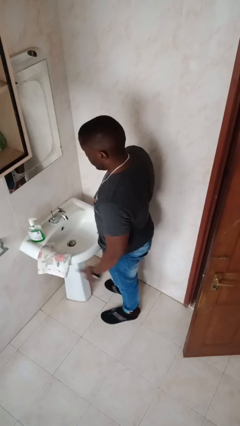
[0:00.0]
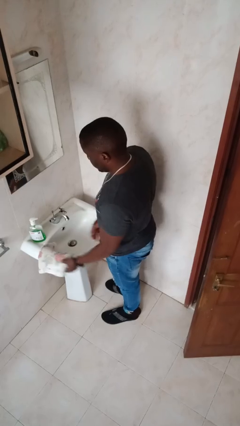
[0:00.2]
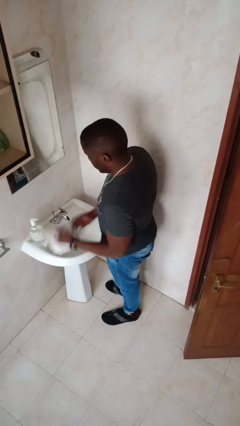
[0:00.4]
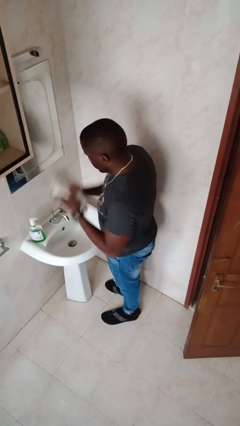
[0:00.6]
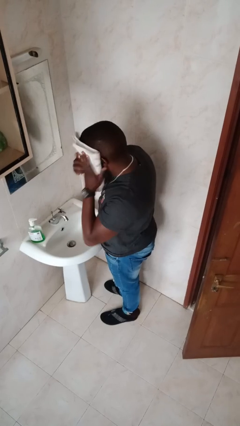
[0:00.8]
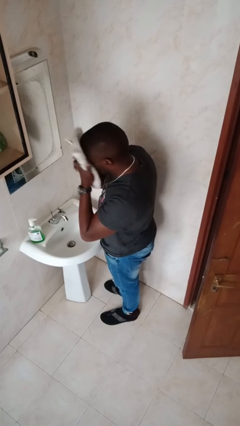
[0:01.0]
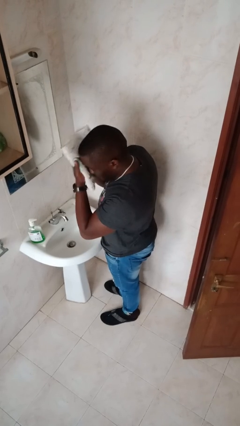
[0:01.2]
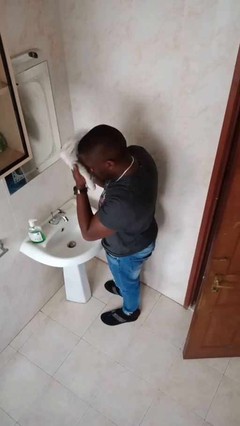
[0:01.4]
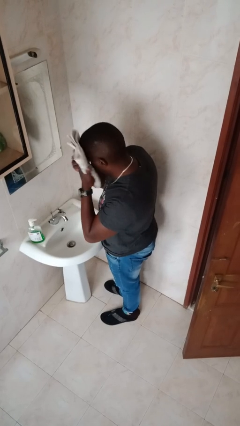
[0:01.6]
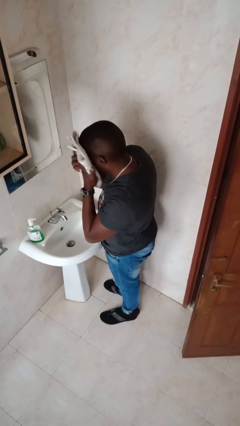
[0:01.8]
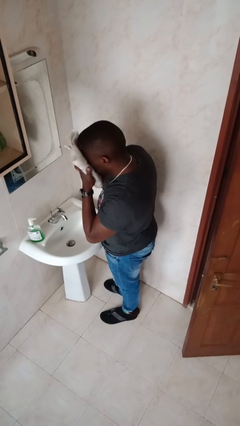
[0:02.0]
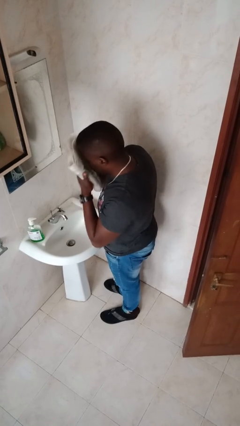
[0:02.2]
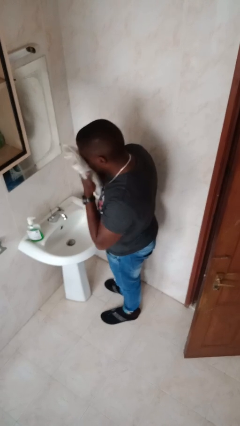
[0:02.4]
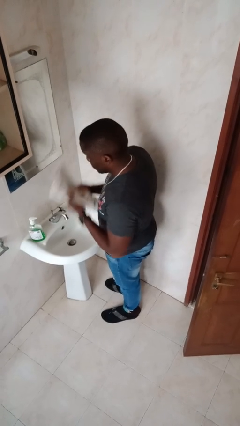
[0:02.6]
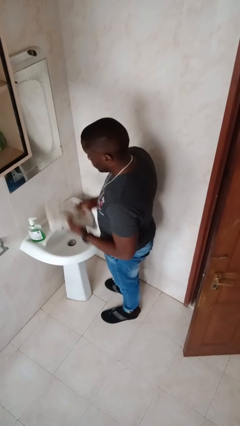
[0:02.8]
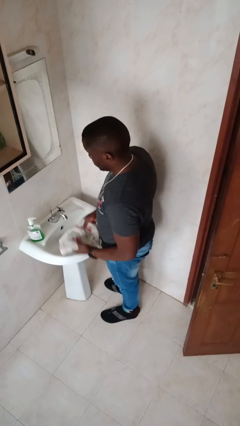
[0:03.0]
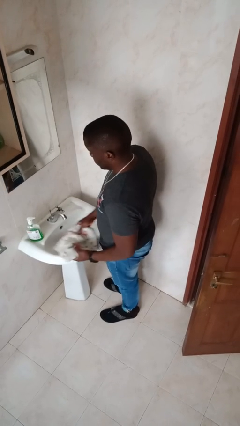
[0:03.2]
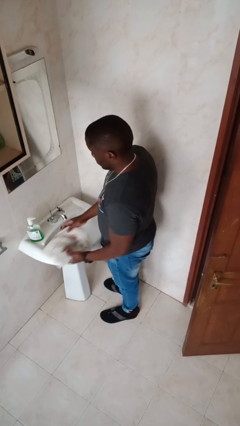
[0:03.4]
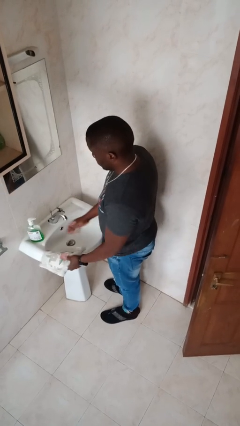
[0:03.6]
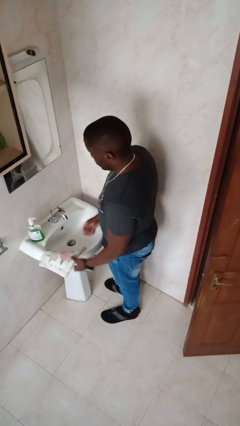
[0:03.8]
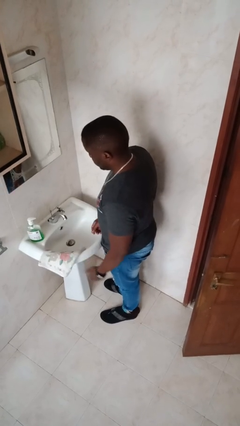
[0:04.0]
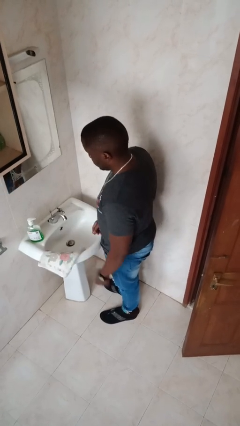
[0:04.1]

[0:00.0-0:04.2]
person dries face with towel

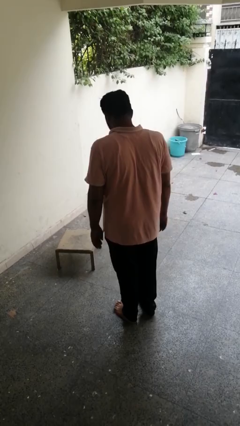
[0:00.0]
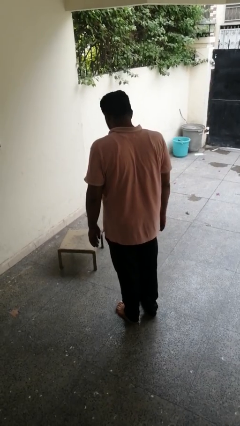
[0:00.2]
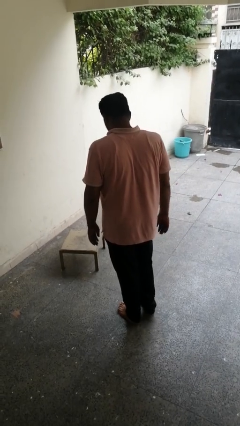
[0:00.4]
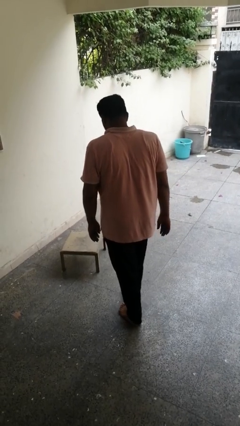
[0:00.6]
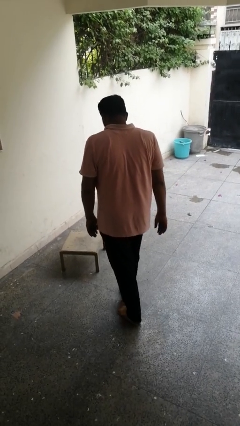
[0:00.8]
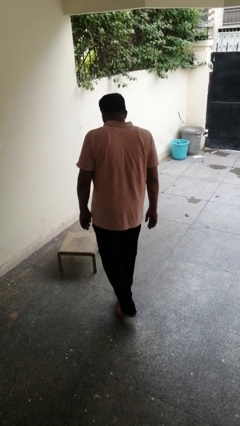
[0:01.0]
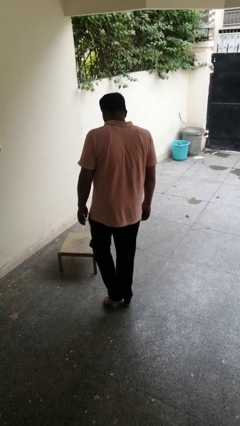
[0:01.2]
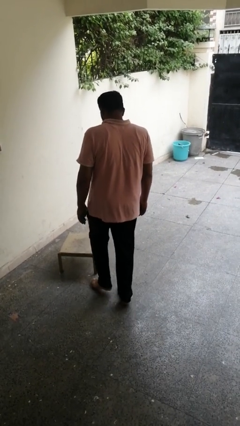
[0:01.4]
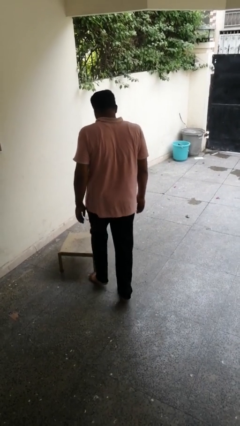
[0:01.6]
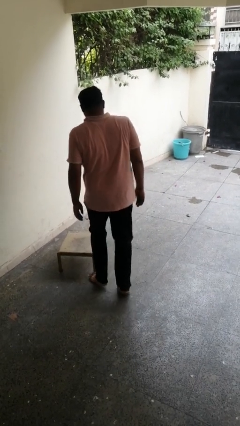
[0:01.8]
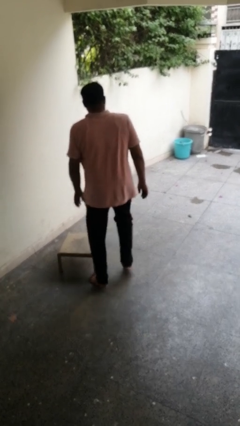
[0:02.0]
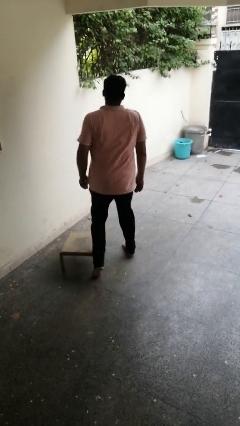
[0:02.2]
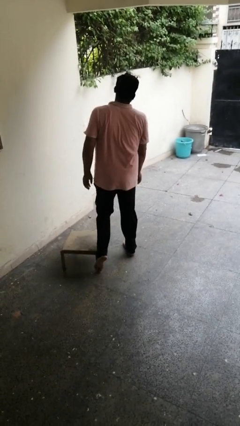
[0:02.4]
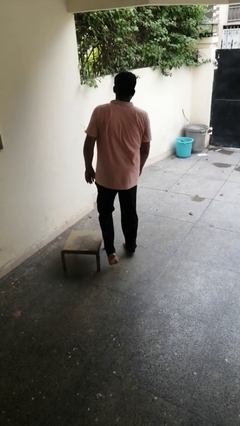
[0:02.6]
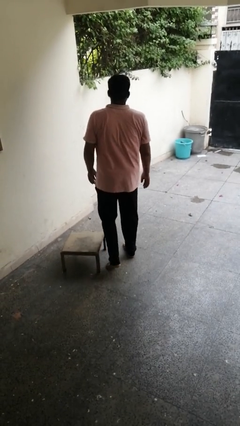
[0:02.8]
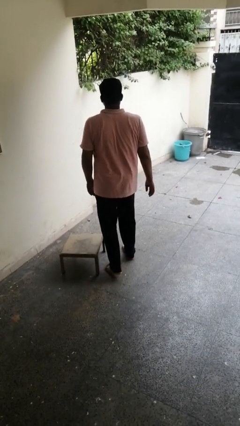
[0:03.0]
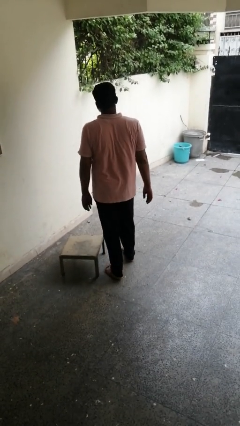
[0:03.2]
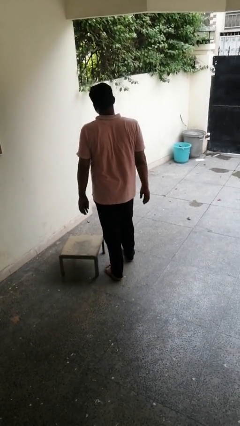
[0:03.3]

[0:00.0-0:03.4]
person stubs toe

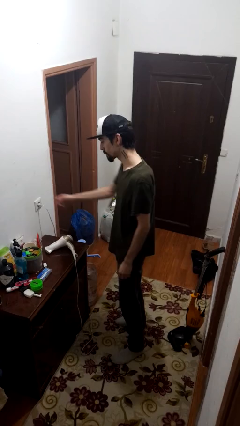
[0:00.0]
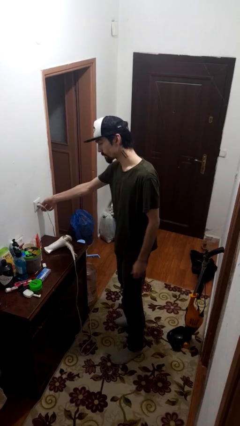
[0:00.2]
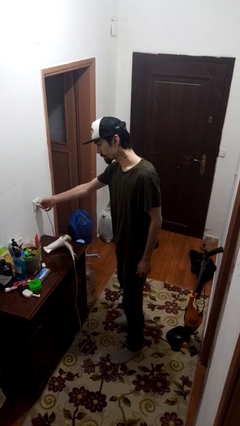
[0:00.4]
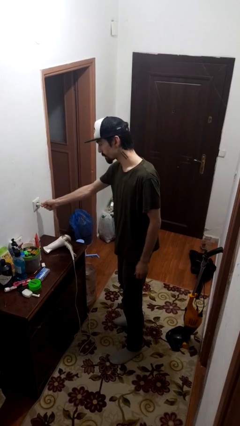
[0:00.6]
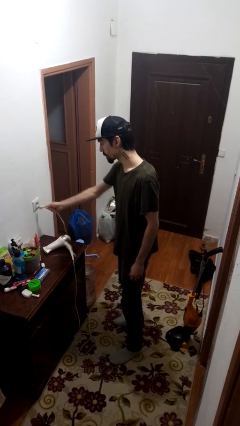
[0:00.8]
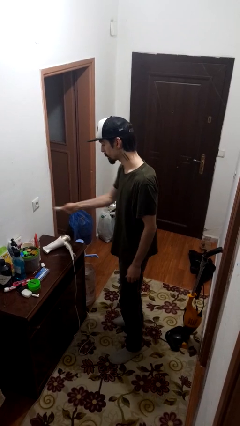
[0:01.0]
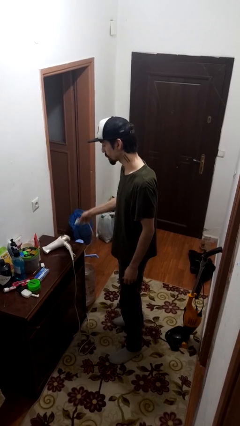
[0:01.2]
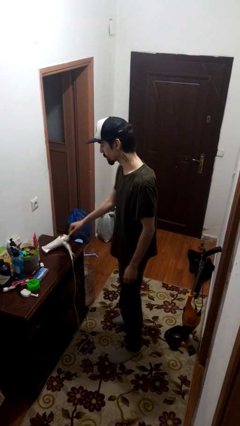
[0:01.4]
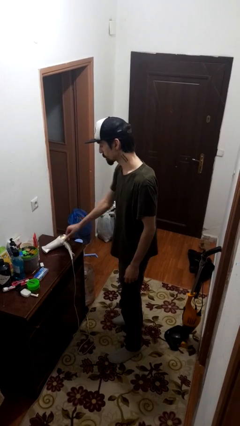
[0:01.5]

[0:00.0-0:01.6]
person unplugs from electrical socket

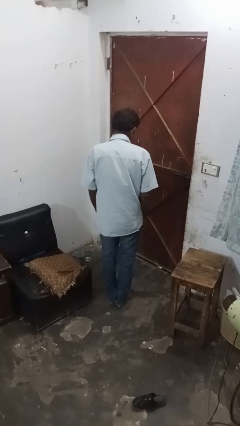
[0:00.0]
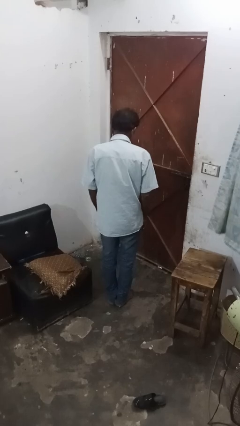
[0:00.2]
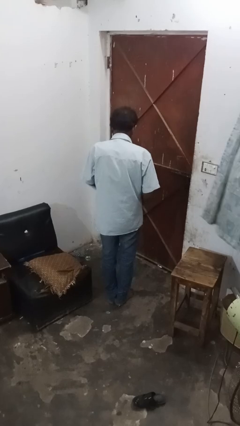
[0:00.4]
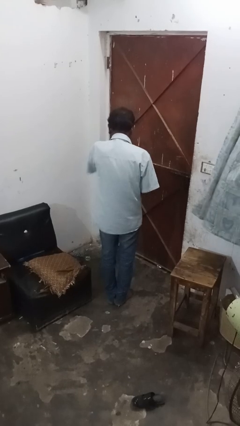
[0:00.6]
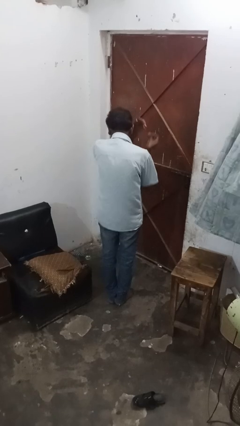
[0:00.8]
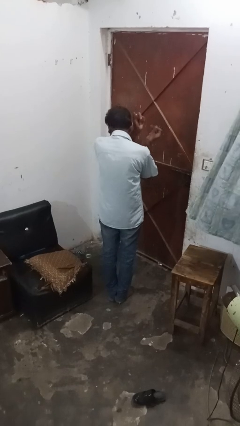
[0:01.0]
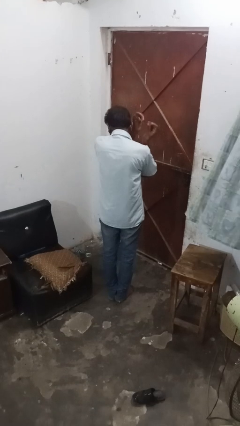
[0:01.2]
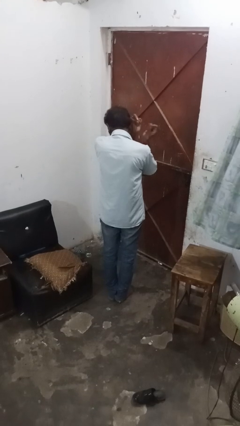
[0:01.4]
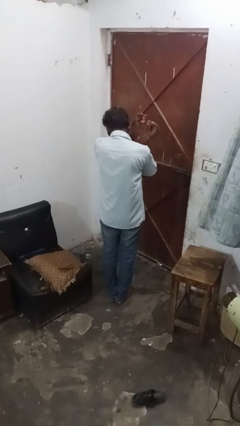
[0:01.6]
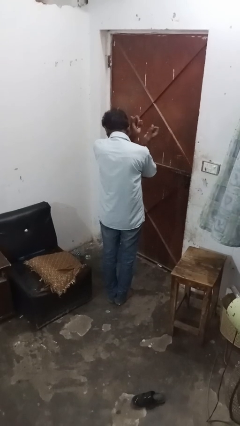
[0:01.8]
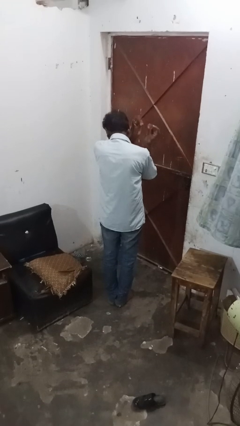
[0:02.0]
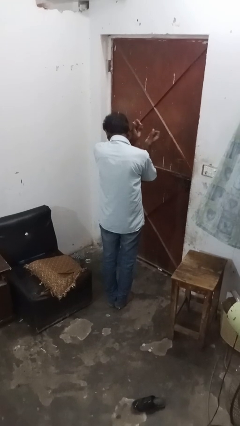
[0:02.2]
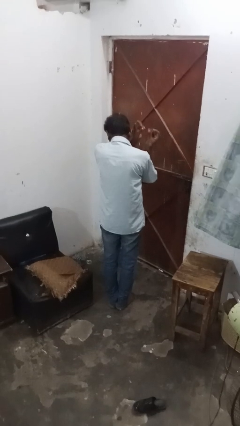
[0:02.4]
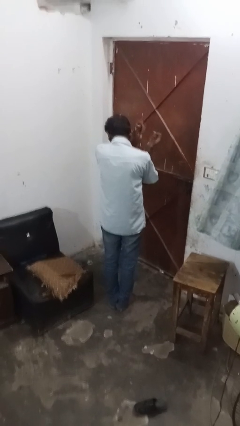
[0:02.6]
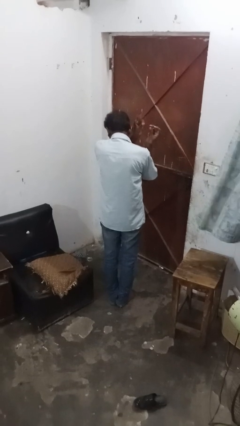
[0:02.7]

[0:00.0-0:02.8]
person snaps fingers

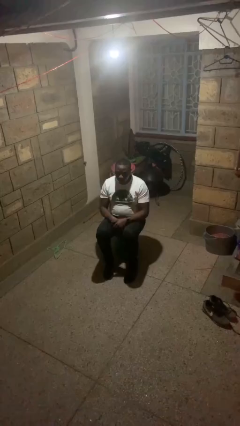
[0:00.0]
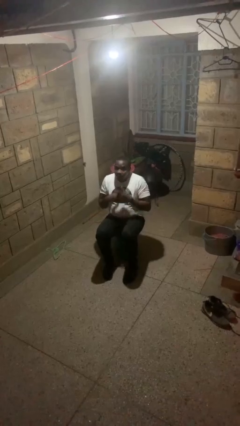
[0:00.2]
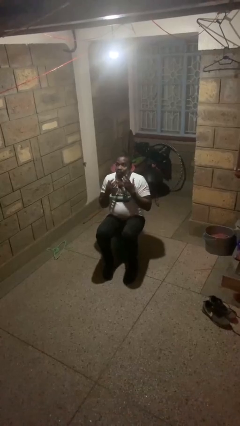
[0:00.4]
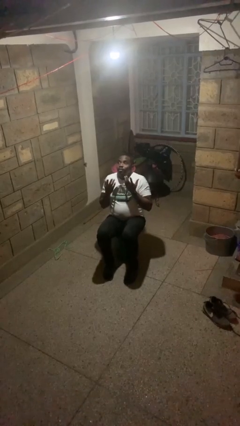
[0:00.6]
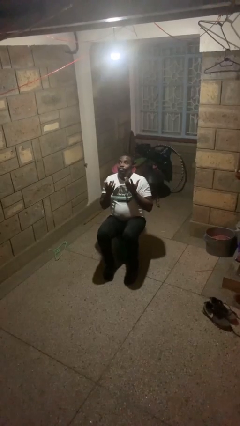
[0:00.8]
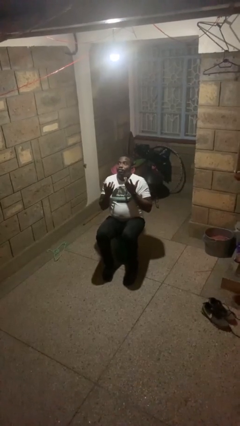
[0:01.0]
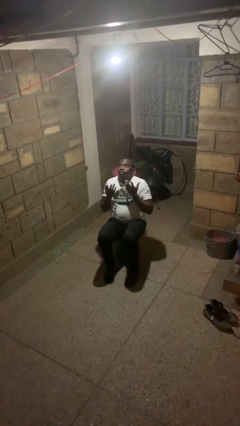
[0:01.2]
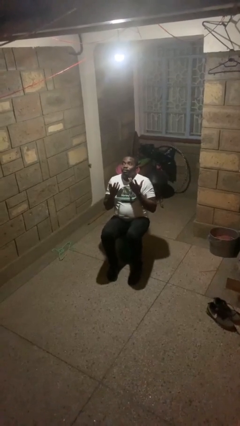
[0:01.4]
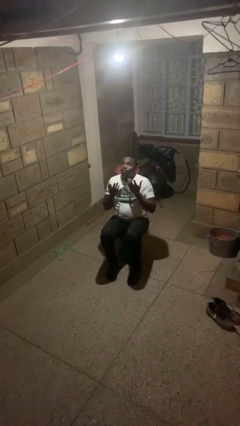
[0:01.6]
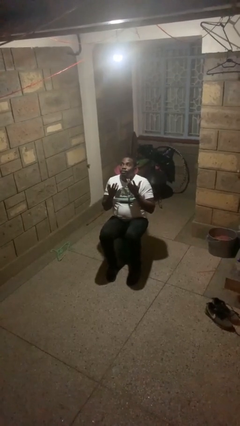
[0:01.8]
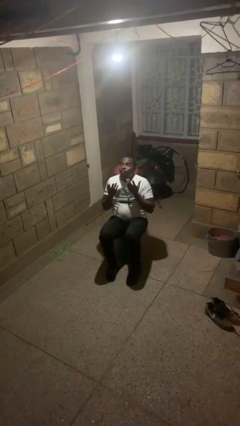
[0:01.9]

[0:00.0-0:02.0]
person shrugs

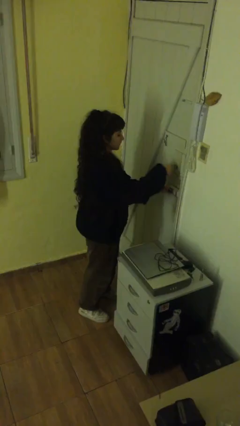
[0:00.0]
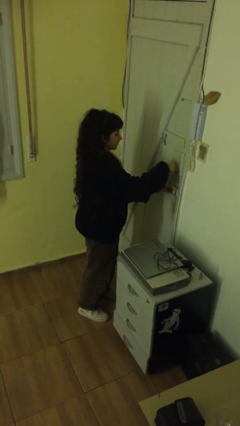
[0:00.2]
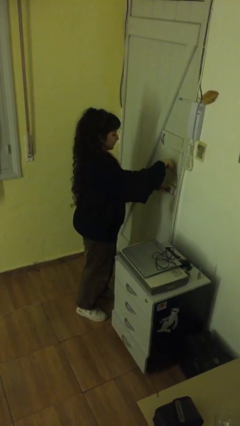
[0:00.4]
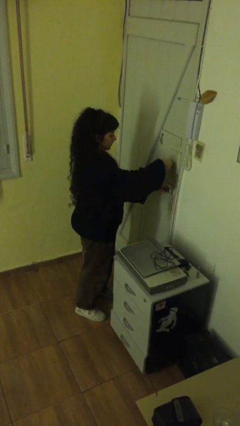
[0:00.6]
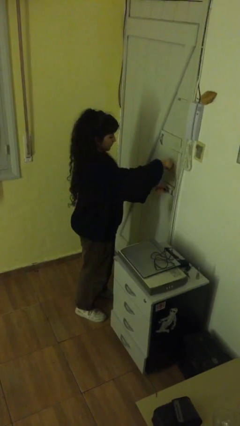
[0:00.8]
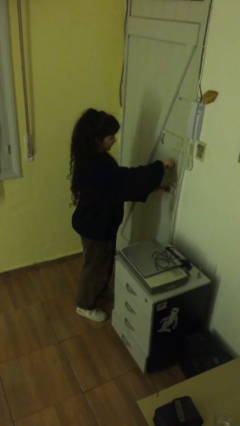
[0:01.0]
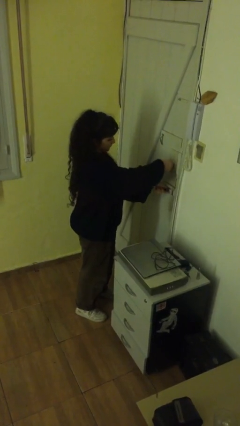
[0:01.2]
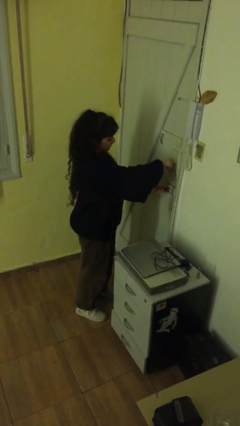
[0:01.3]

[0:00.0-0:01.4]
person unlocks door with keys

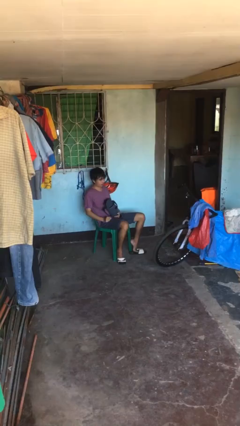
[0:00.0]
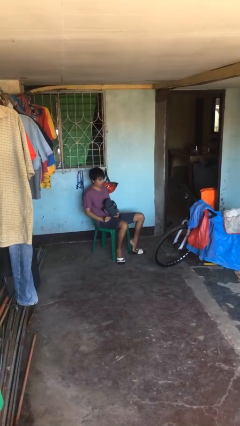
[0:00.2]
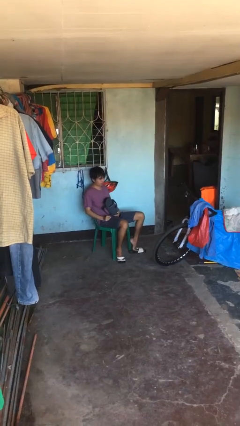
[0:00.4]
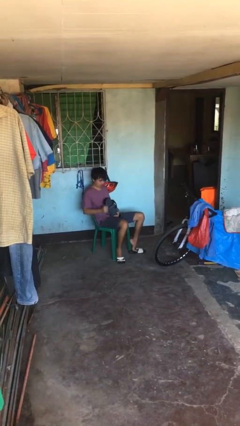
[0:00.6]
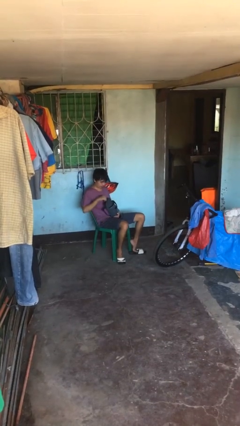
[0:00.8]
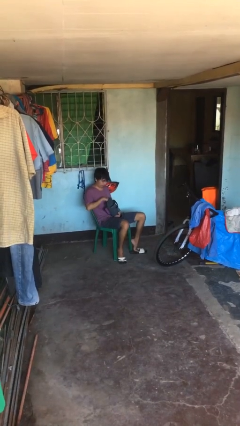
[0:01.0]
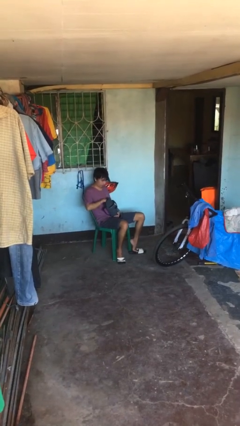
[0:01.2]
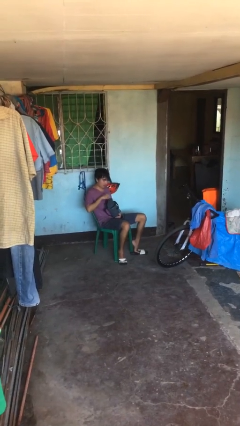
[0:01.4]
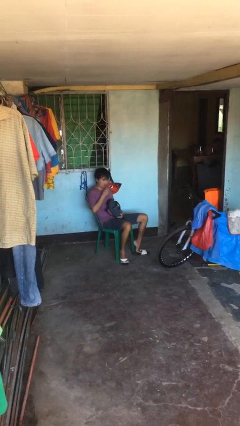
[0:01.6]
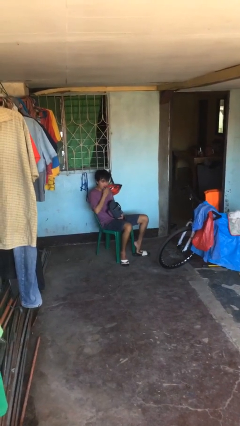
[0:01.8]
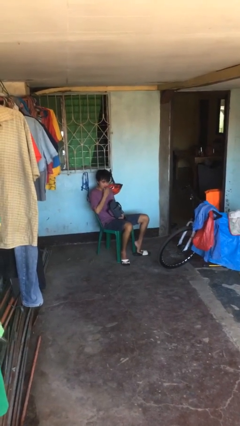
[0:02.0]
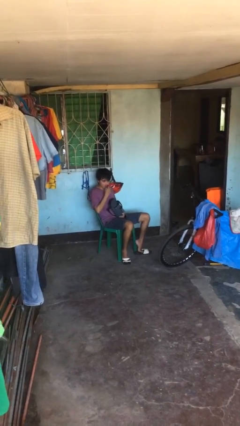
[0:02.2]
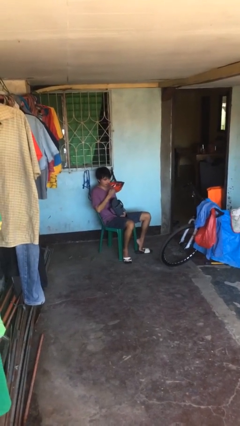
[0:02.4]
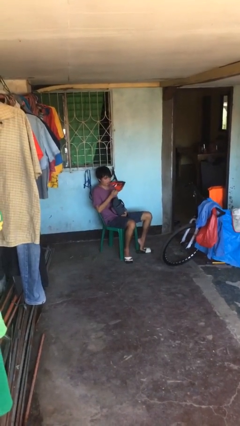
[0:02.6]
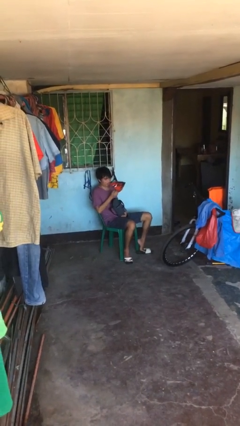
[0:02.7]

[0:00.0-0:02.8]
person eats snack from bag
